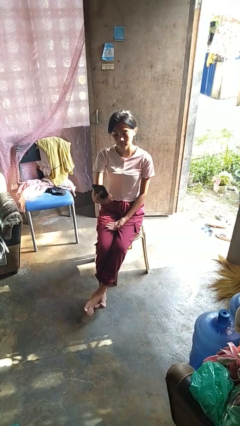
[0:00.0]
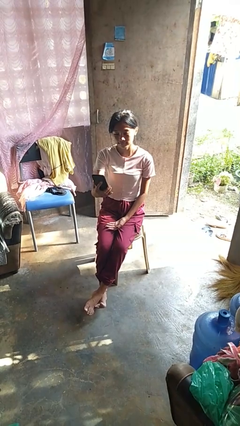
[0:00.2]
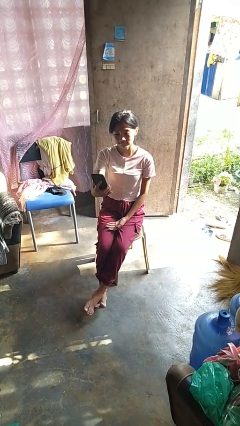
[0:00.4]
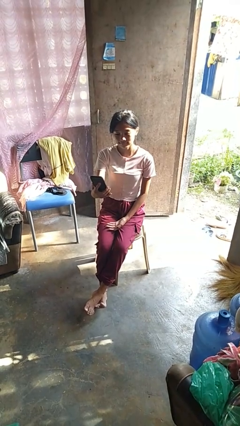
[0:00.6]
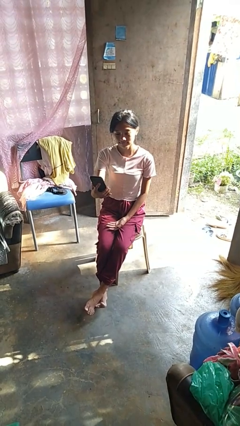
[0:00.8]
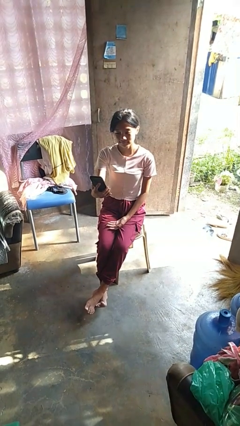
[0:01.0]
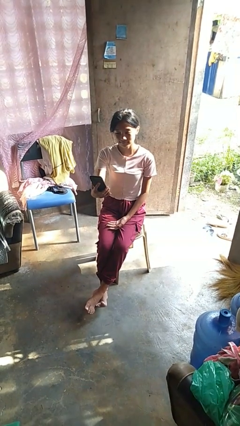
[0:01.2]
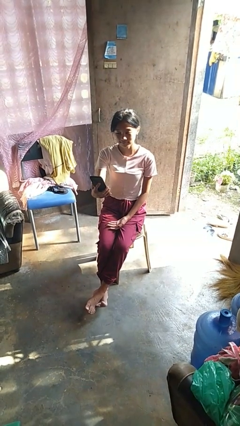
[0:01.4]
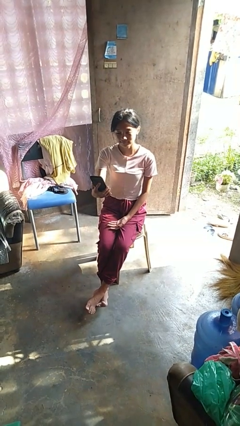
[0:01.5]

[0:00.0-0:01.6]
person takes selfie

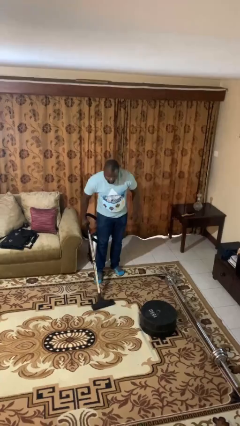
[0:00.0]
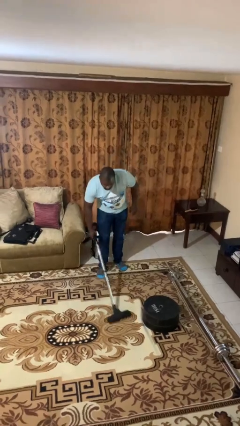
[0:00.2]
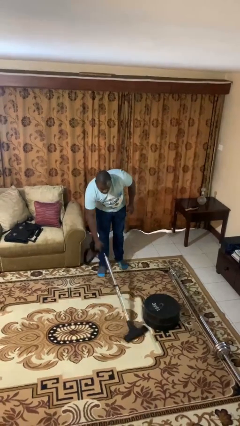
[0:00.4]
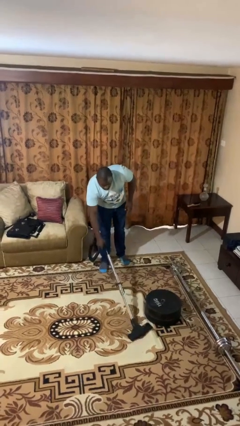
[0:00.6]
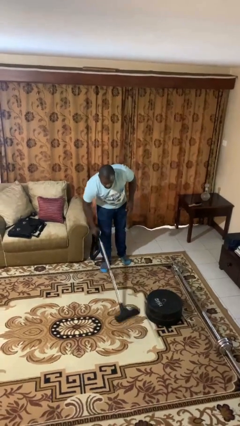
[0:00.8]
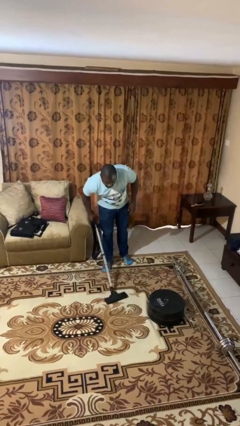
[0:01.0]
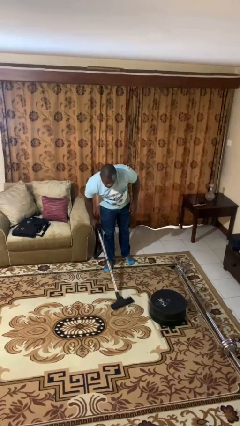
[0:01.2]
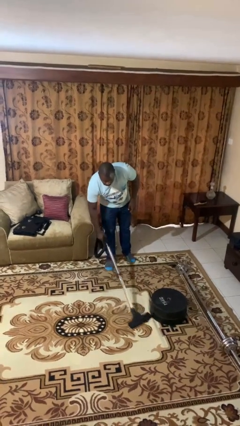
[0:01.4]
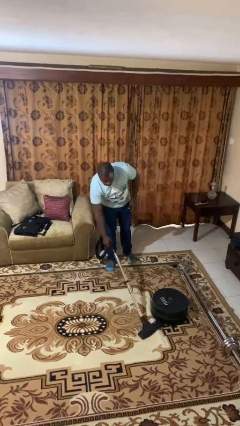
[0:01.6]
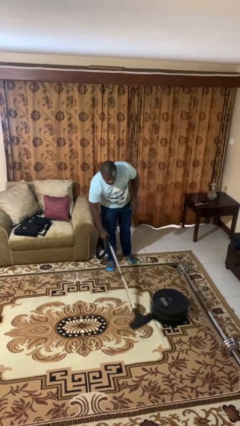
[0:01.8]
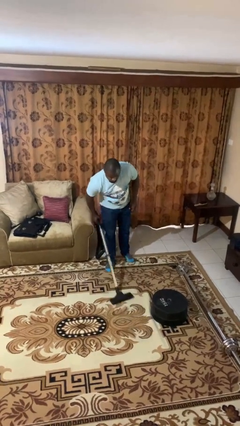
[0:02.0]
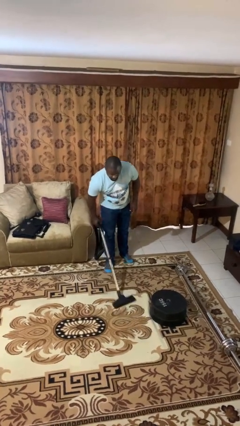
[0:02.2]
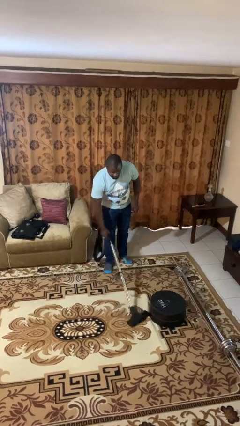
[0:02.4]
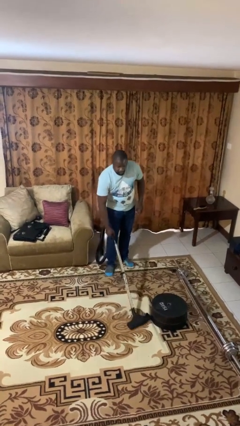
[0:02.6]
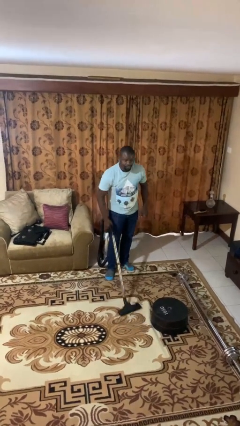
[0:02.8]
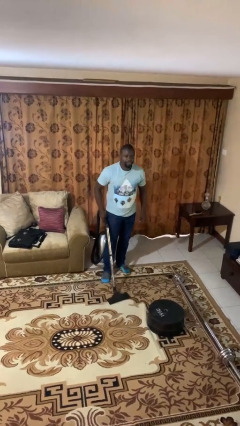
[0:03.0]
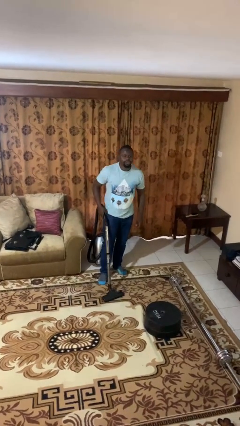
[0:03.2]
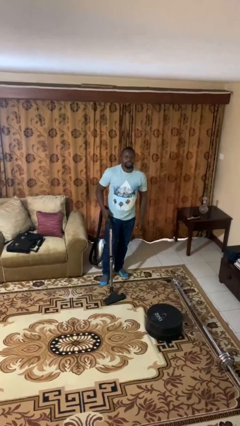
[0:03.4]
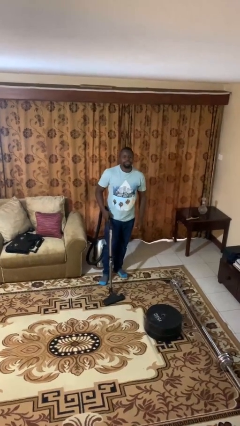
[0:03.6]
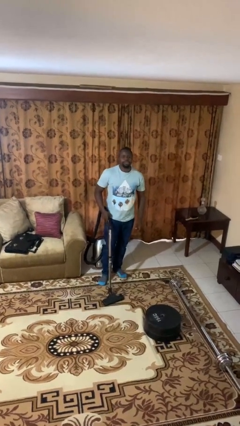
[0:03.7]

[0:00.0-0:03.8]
person vacuums carpet

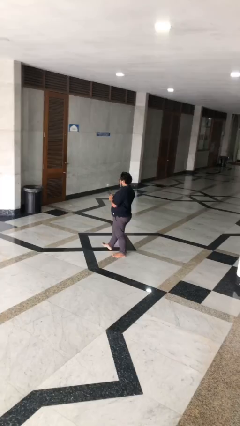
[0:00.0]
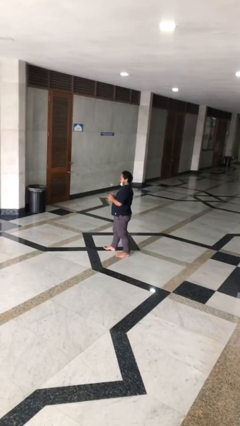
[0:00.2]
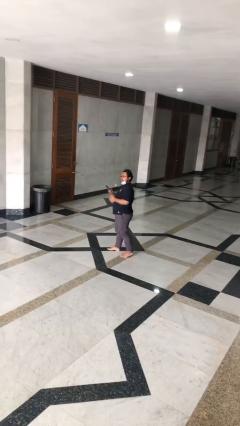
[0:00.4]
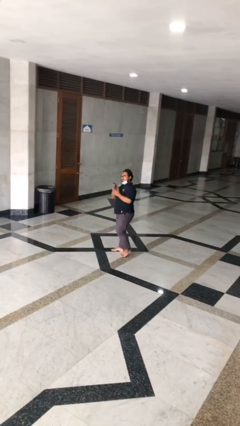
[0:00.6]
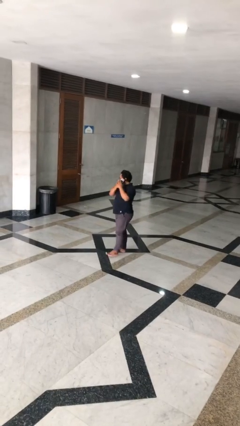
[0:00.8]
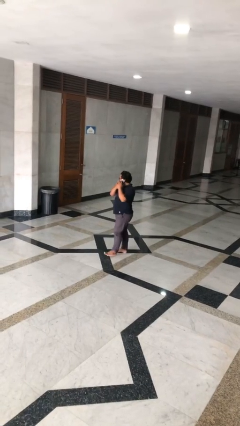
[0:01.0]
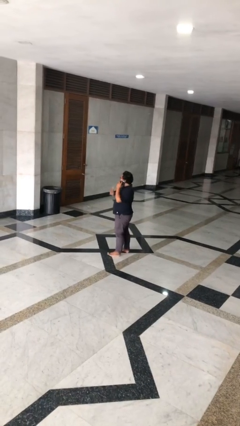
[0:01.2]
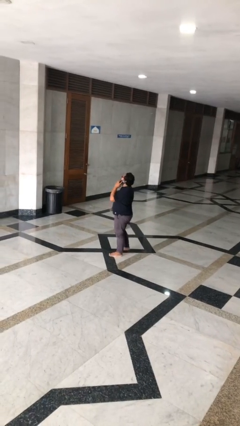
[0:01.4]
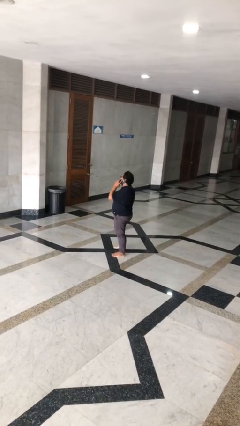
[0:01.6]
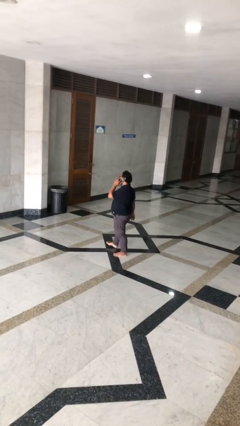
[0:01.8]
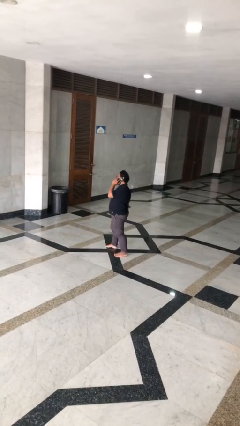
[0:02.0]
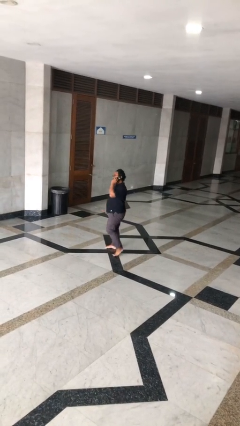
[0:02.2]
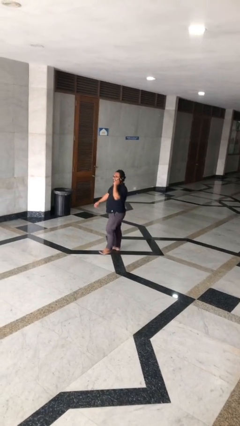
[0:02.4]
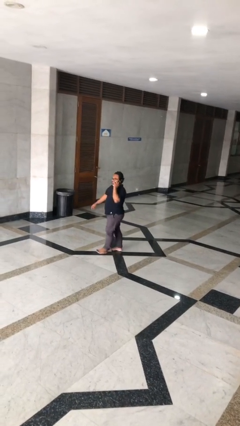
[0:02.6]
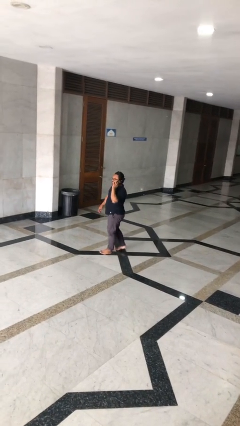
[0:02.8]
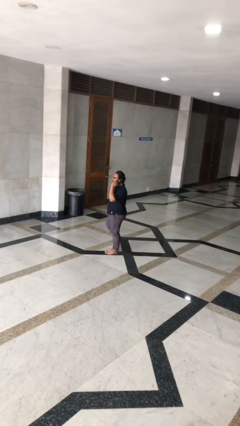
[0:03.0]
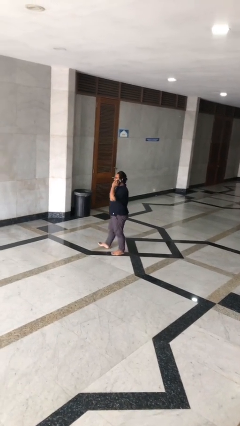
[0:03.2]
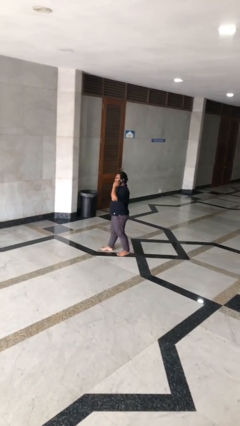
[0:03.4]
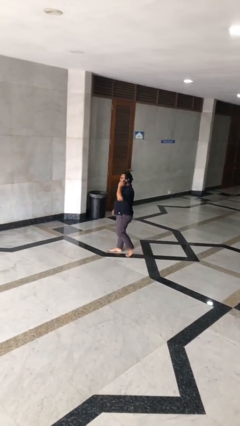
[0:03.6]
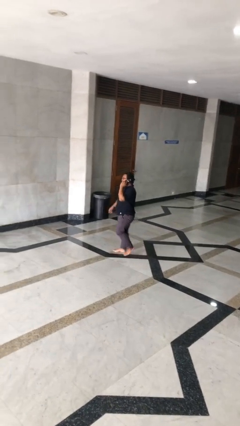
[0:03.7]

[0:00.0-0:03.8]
person talks on phone

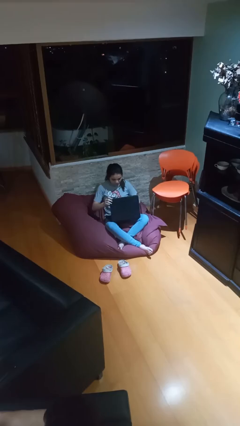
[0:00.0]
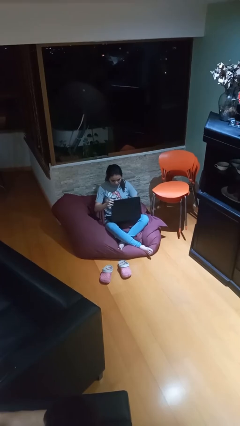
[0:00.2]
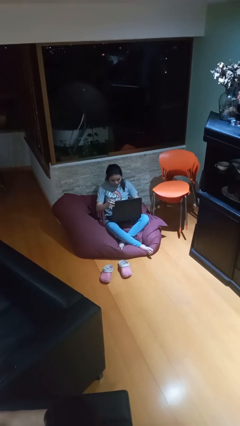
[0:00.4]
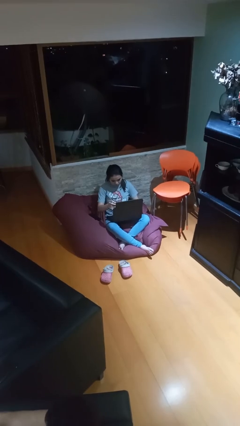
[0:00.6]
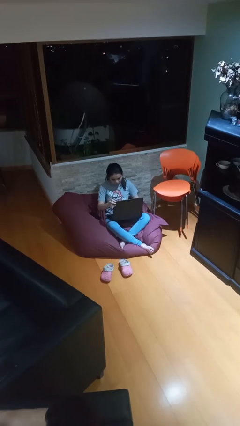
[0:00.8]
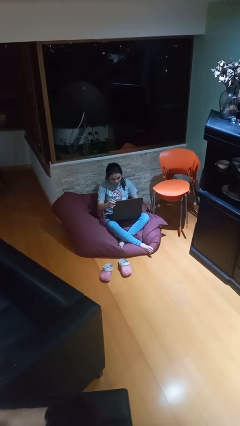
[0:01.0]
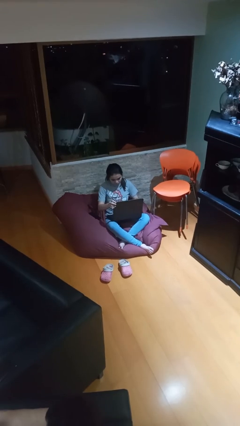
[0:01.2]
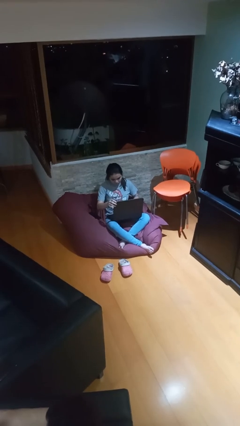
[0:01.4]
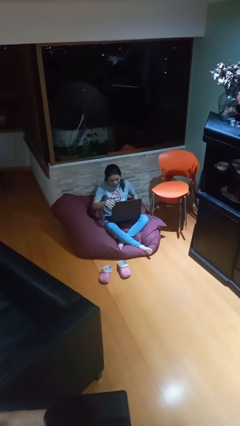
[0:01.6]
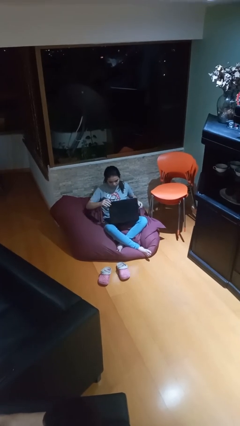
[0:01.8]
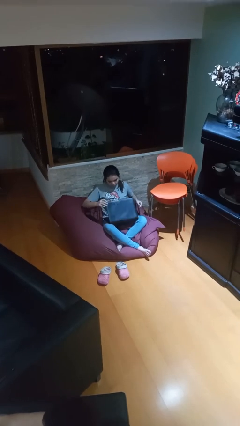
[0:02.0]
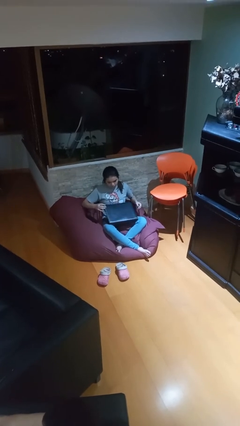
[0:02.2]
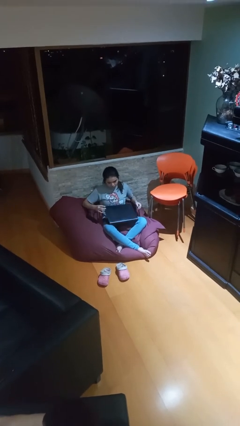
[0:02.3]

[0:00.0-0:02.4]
person interacts with laptop

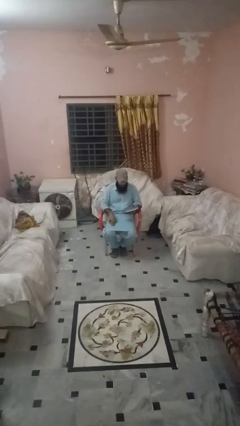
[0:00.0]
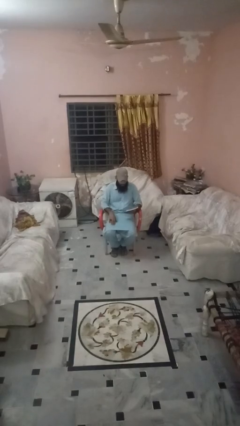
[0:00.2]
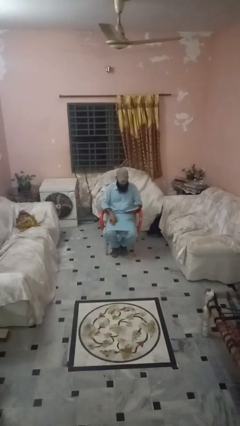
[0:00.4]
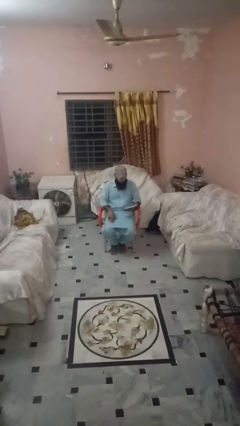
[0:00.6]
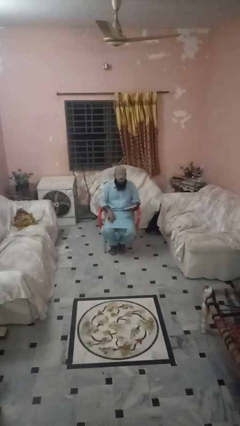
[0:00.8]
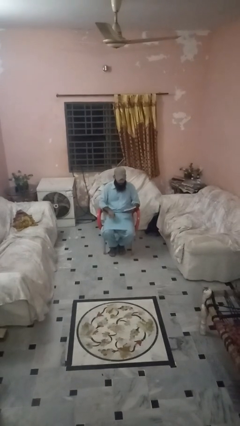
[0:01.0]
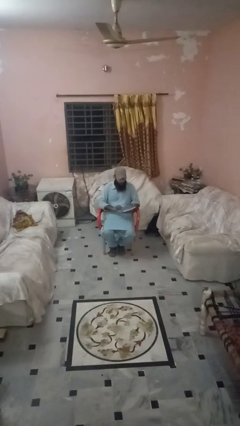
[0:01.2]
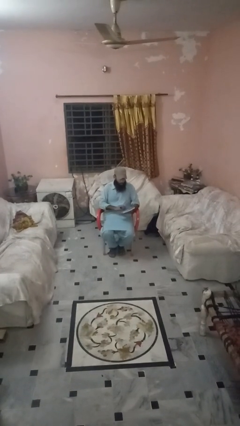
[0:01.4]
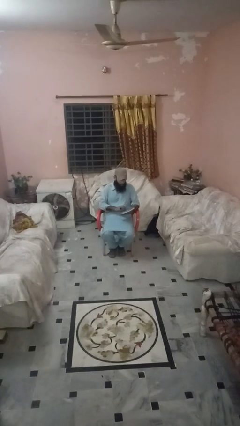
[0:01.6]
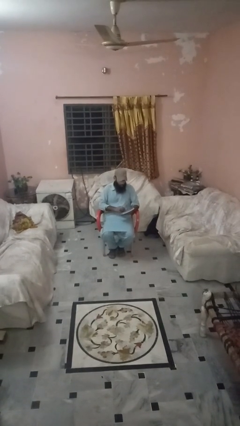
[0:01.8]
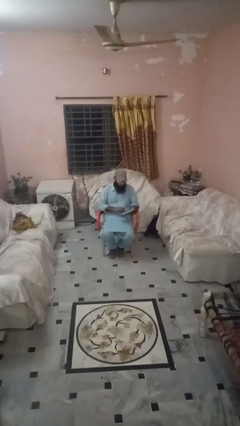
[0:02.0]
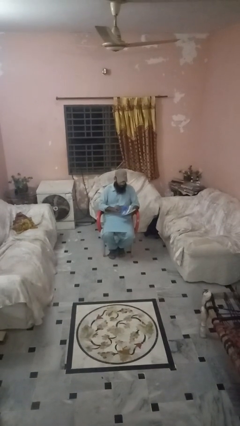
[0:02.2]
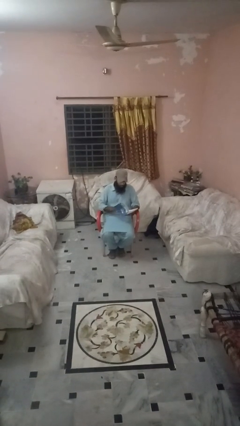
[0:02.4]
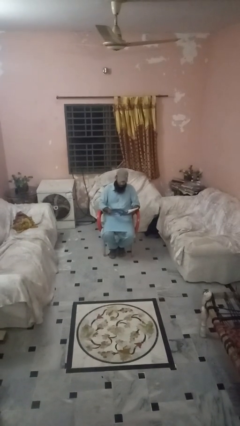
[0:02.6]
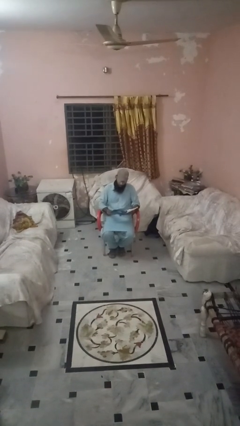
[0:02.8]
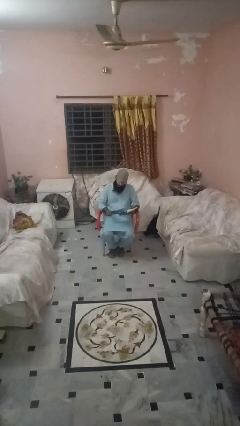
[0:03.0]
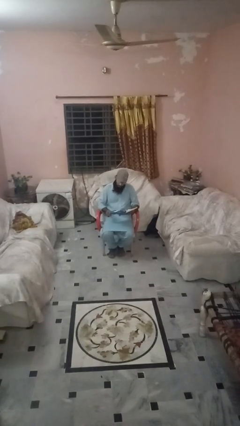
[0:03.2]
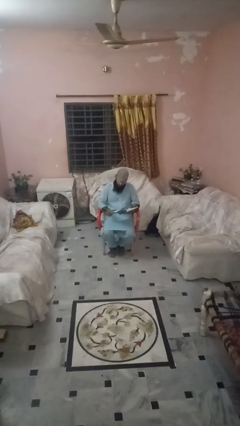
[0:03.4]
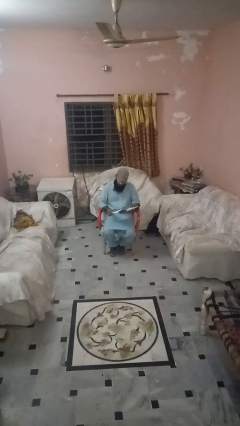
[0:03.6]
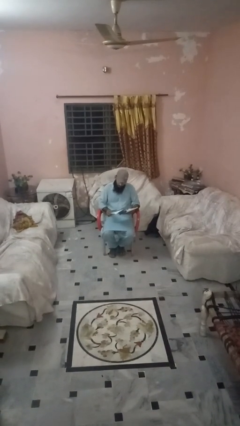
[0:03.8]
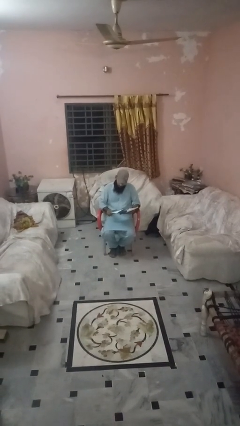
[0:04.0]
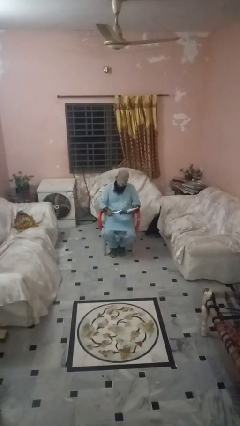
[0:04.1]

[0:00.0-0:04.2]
person reads book

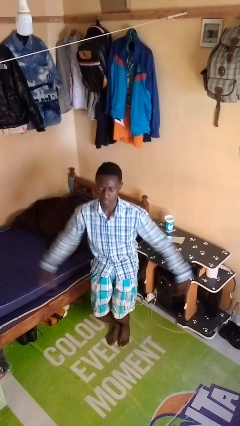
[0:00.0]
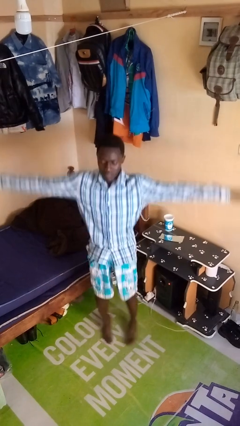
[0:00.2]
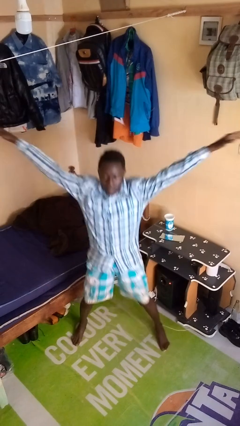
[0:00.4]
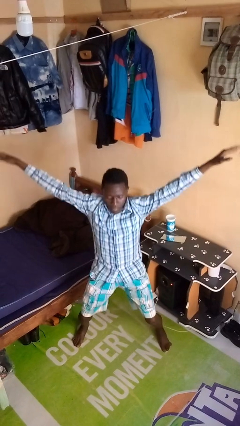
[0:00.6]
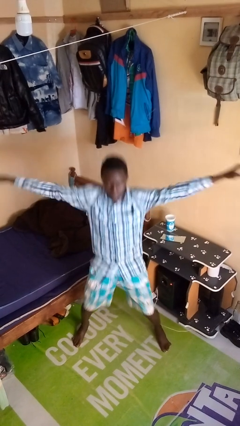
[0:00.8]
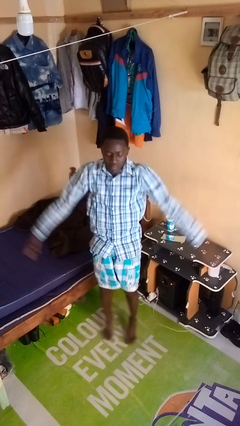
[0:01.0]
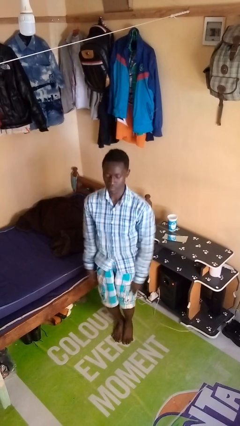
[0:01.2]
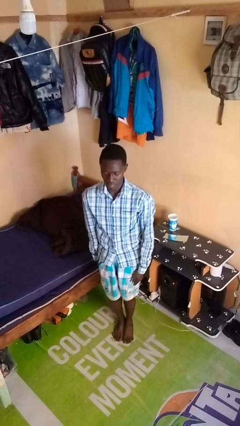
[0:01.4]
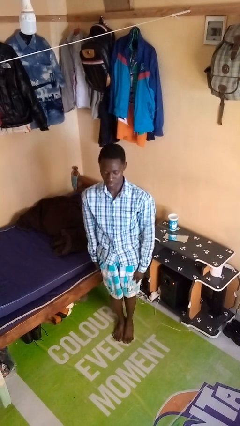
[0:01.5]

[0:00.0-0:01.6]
person exercises with jumping jacks
